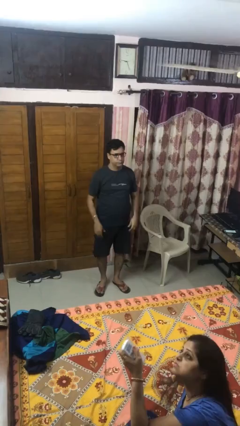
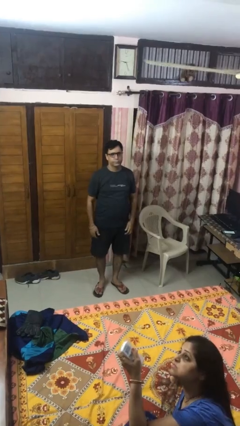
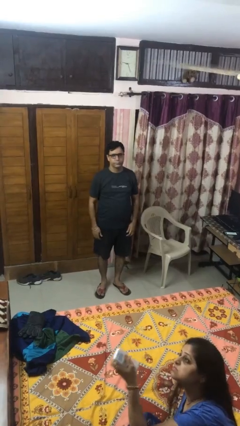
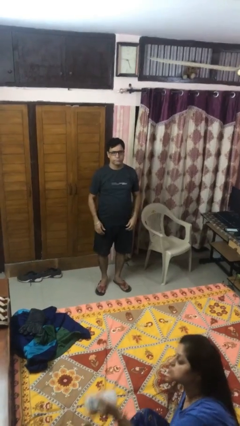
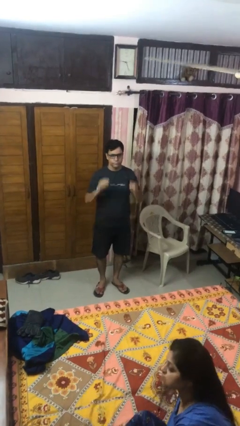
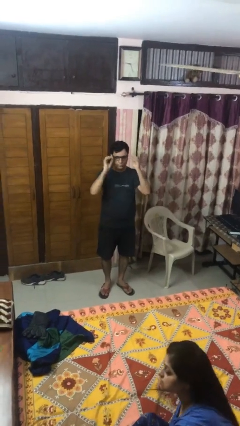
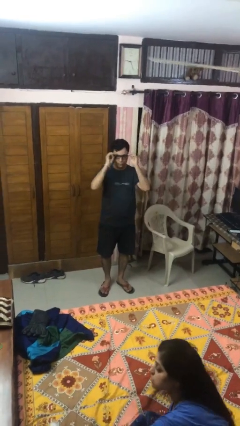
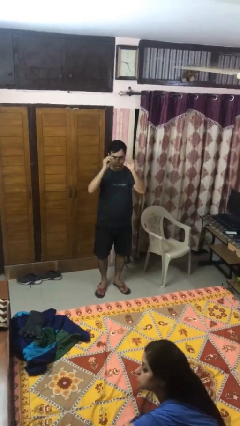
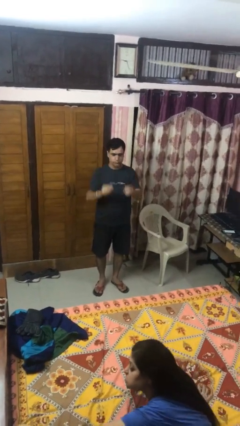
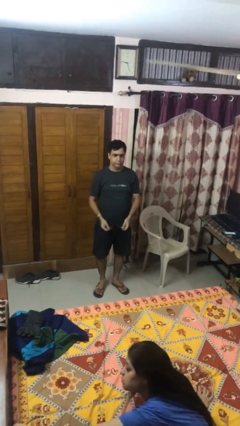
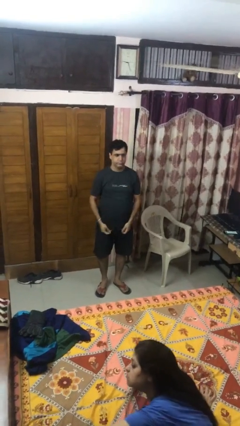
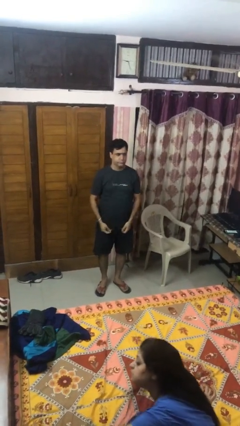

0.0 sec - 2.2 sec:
person takes off glasses

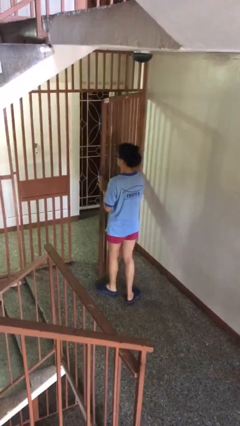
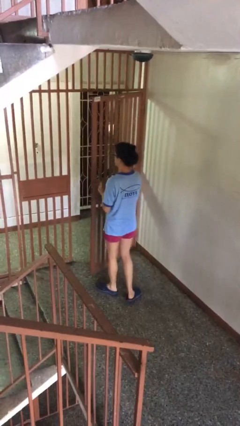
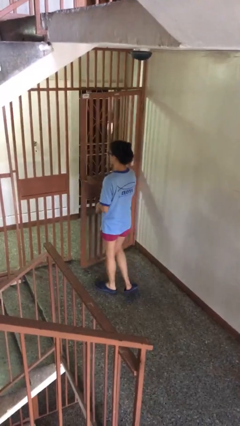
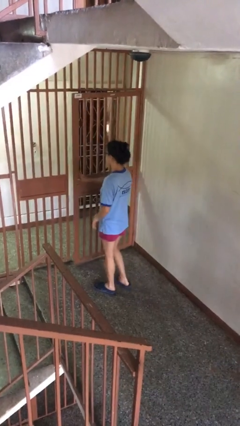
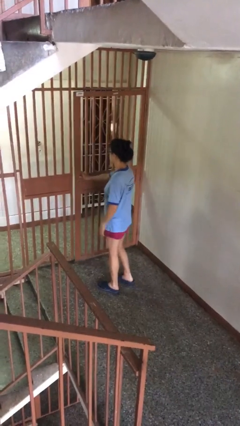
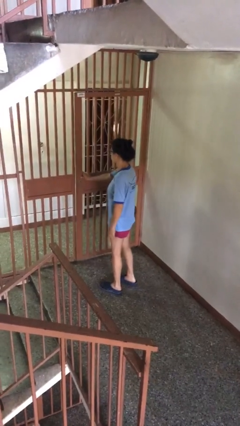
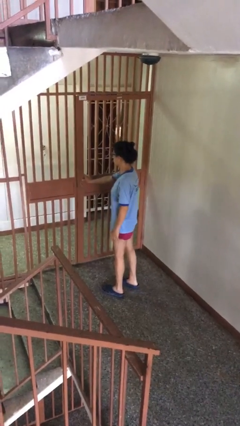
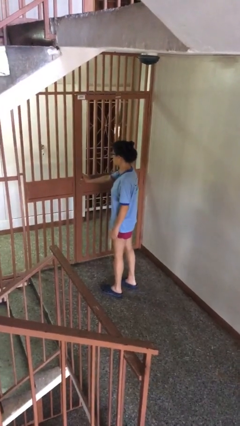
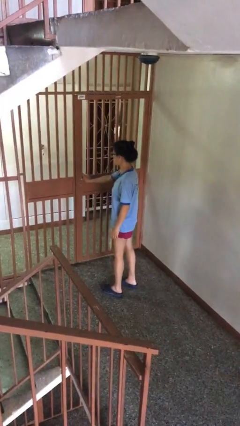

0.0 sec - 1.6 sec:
person closes facility door

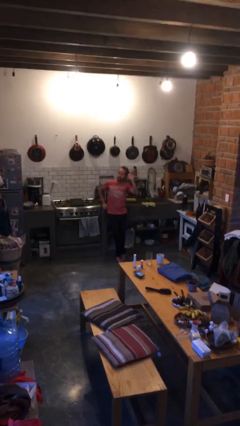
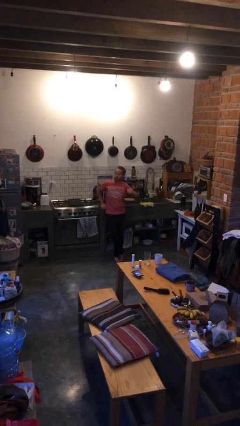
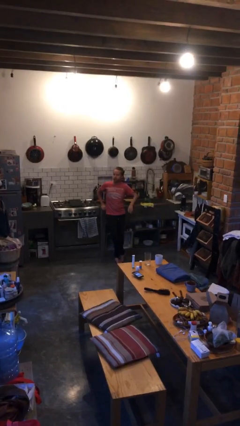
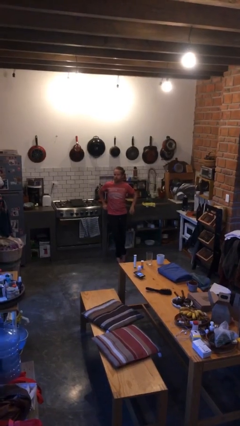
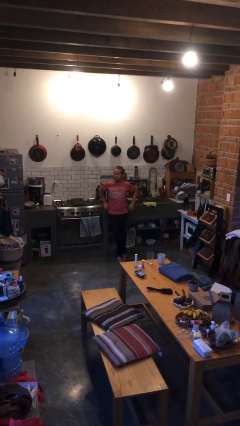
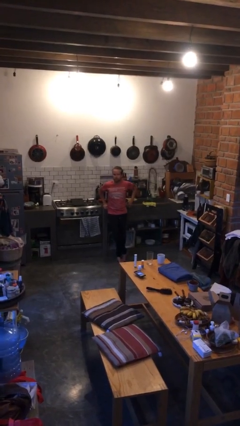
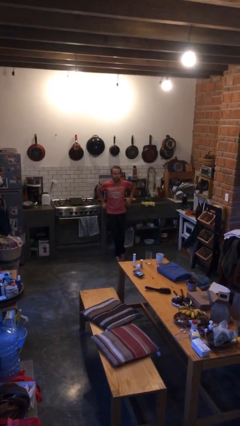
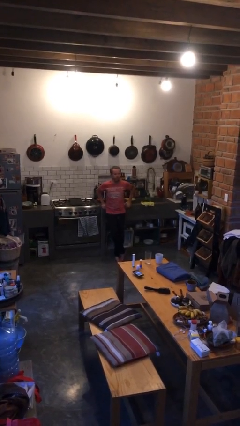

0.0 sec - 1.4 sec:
person gestures lower hand

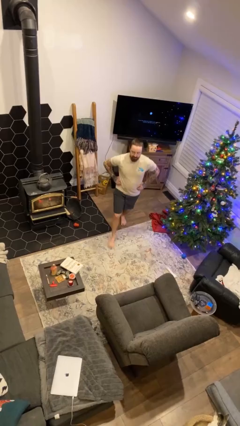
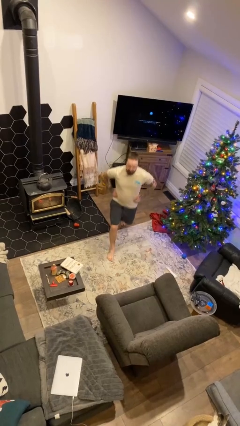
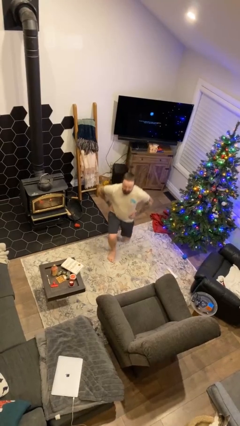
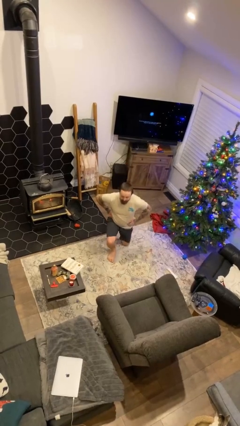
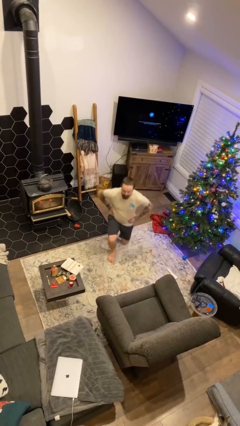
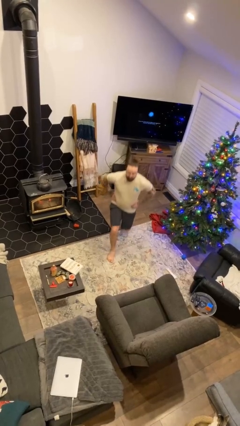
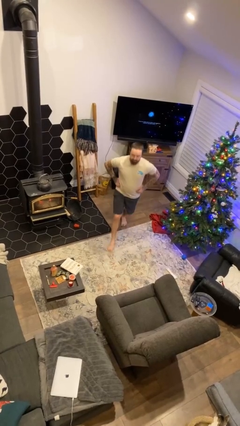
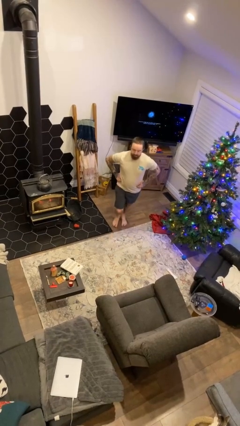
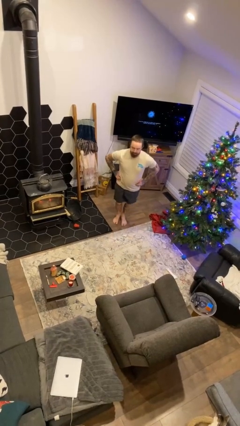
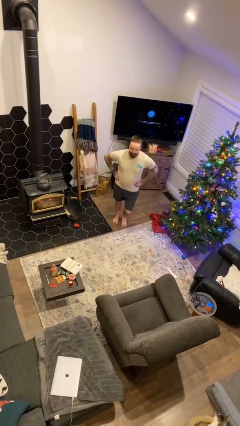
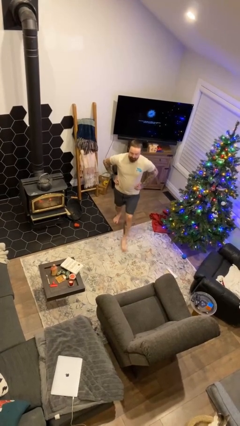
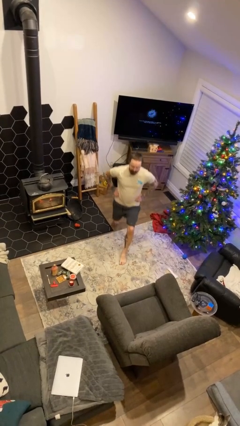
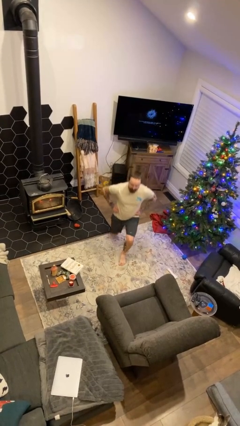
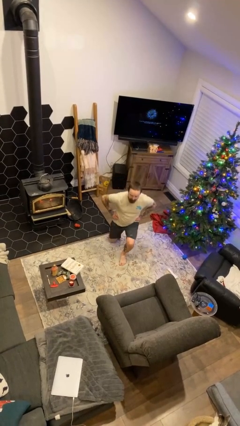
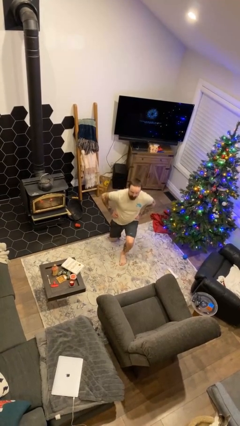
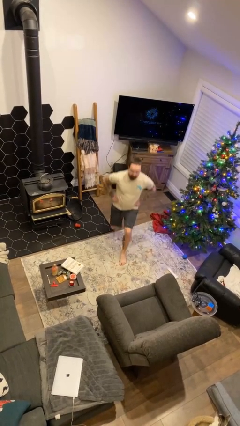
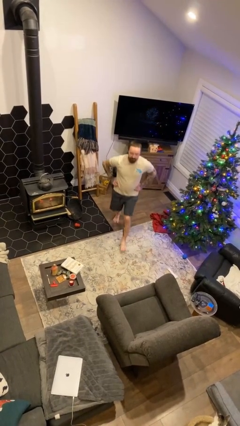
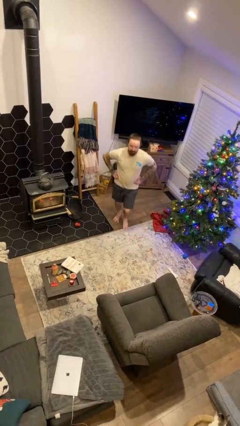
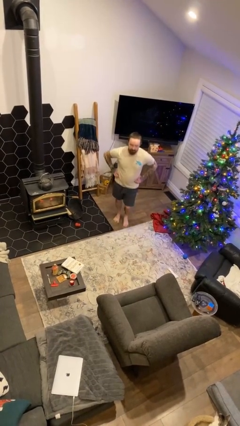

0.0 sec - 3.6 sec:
person exercises with lunges

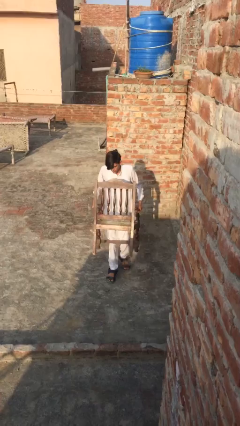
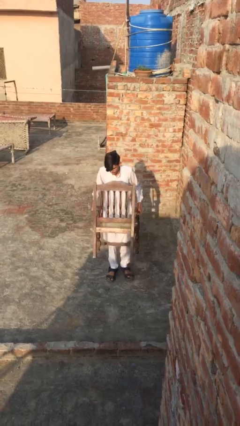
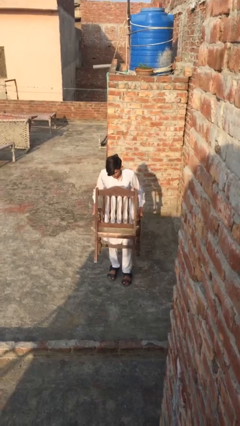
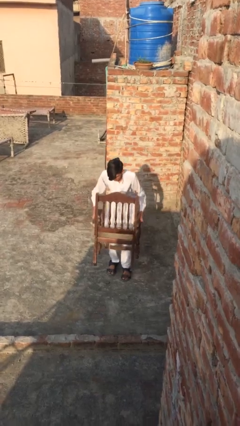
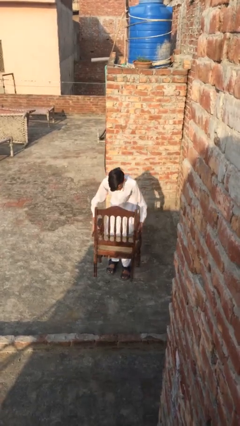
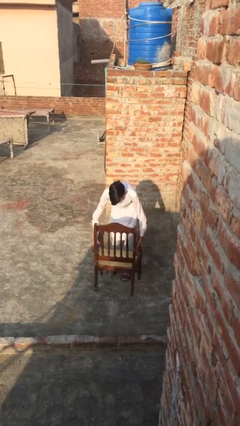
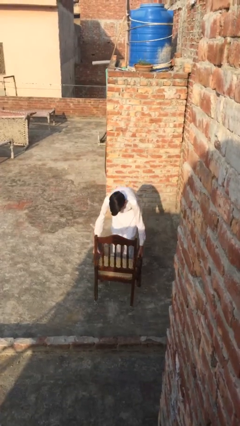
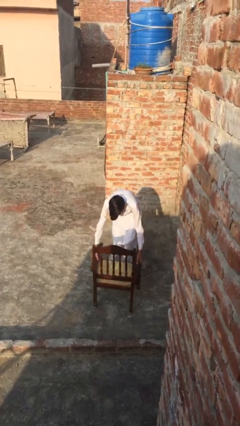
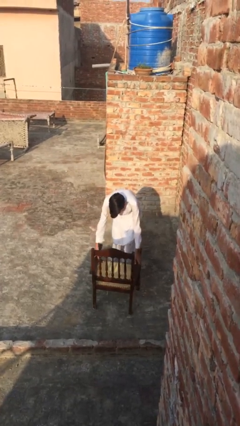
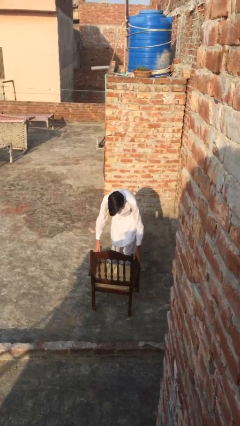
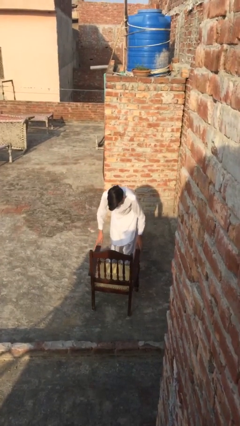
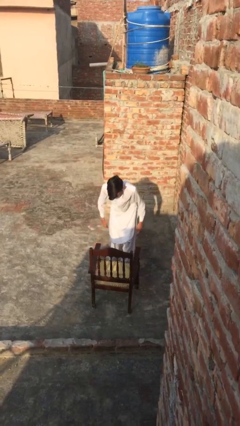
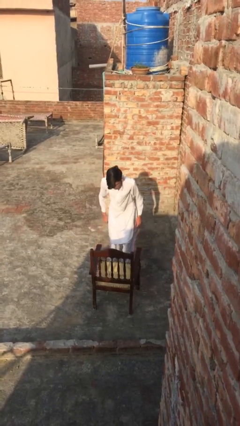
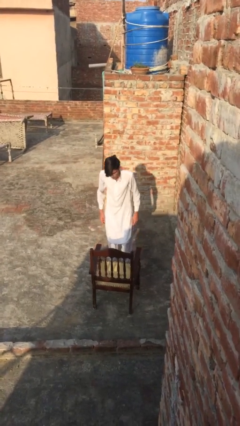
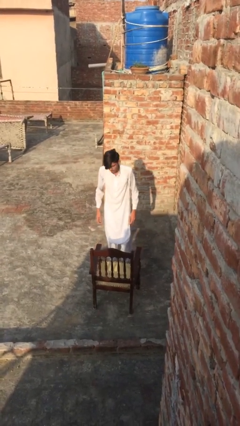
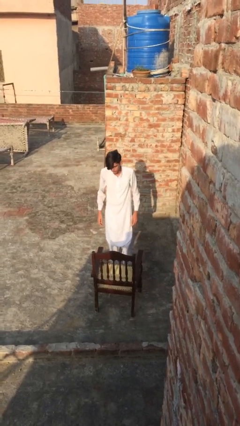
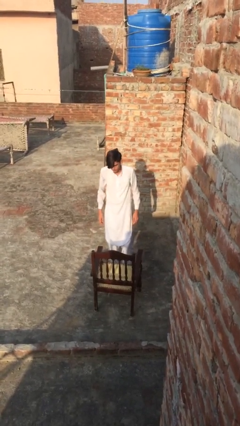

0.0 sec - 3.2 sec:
person puts down object on floor

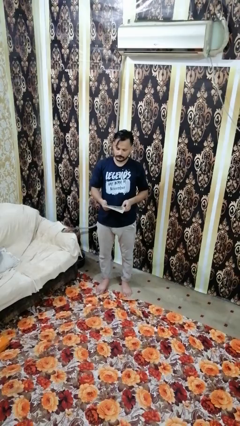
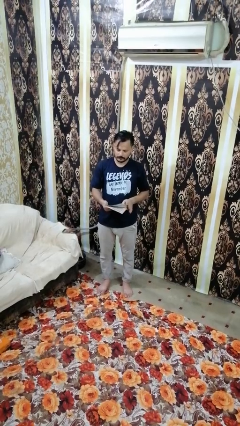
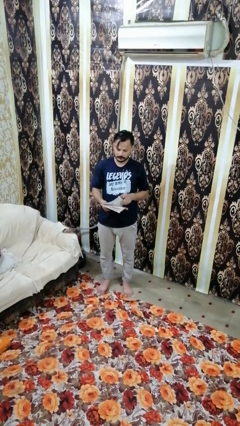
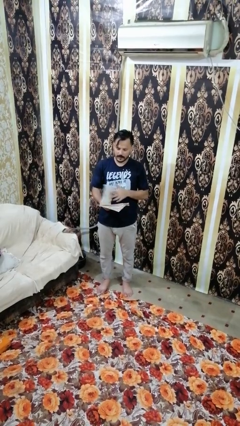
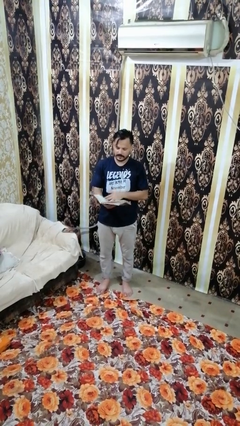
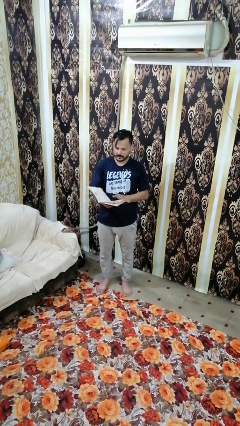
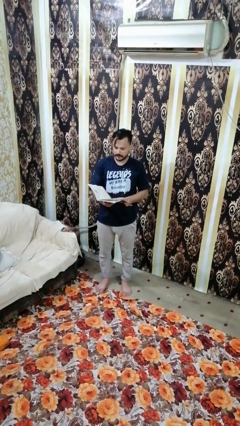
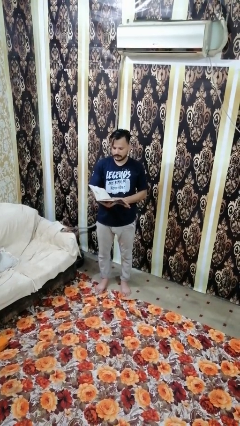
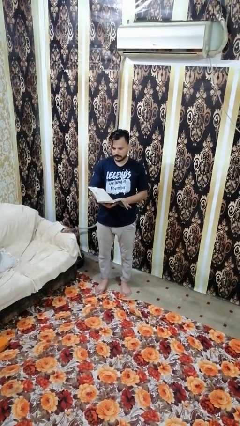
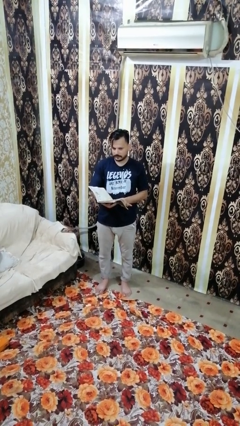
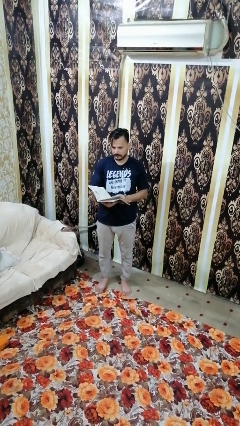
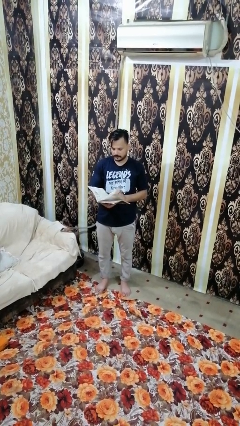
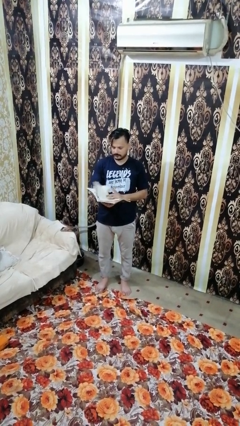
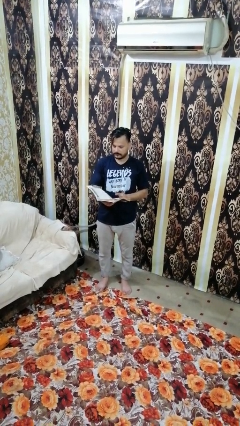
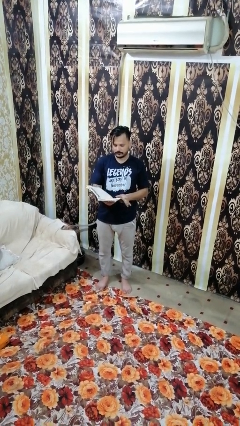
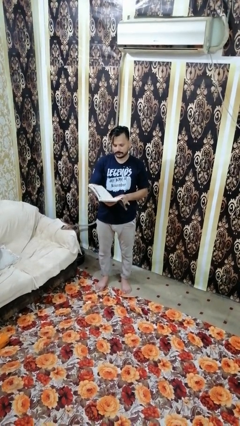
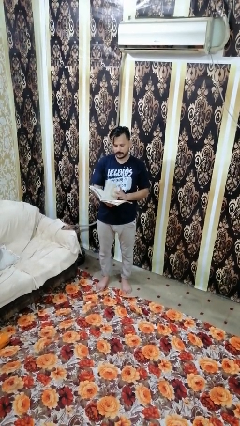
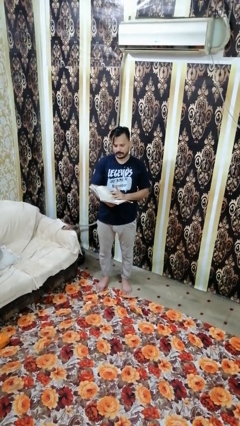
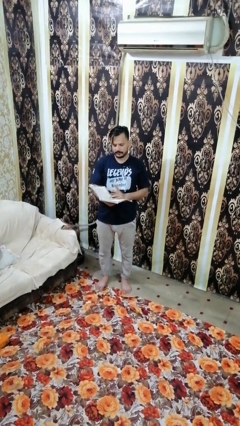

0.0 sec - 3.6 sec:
person reads book

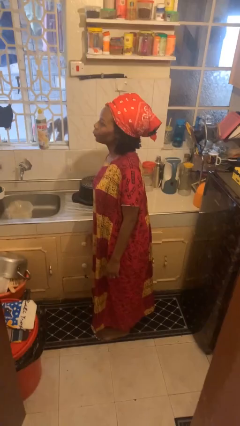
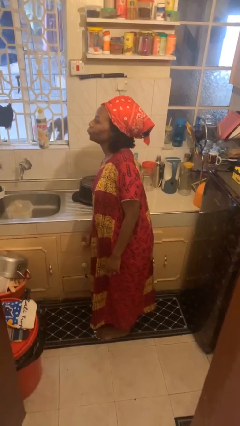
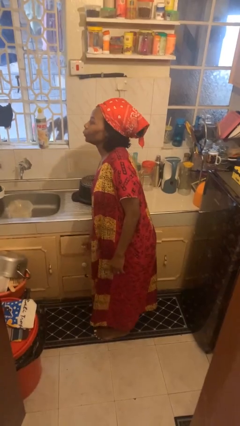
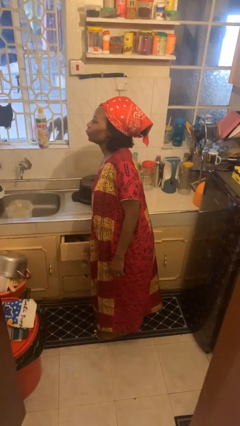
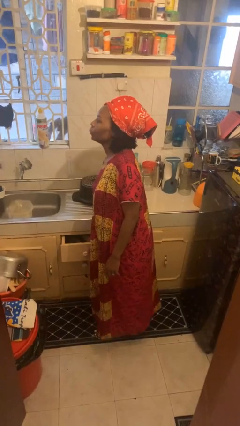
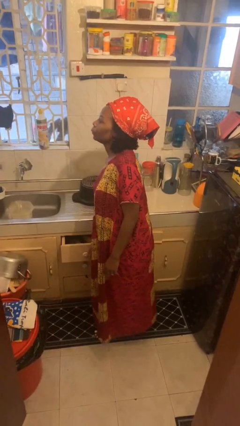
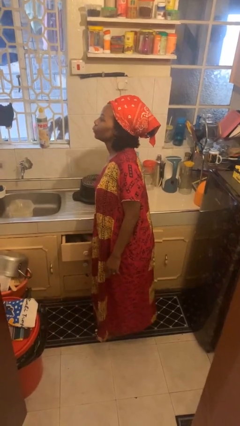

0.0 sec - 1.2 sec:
person opens kitchen drawer

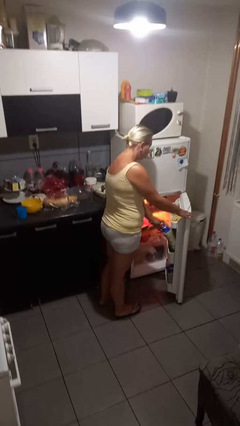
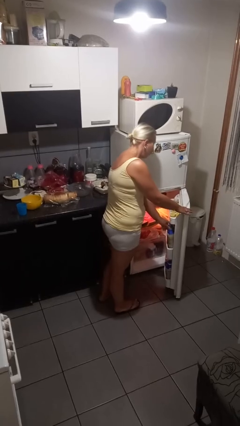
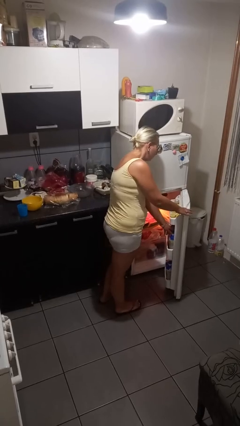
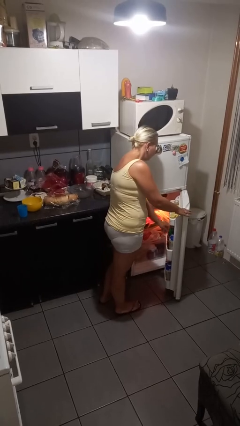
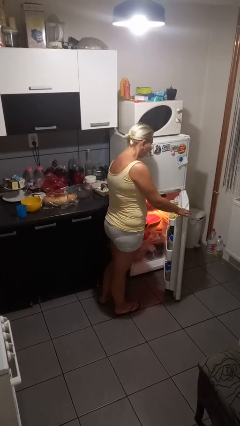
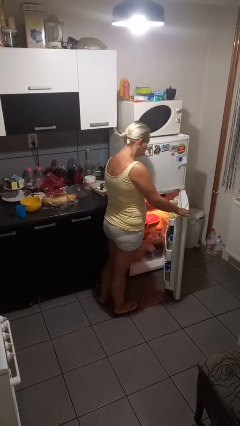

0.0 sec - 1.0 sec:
person puts object into refrigerator
